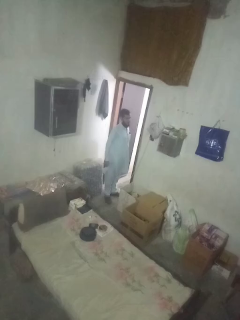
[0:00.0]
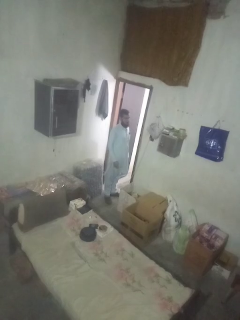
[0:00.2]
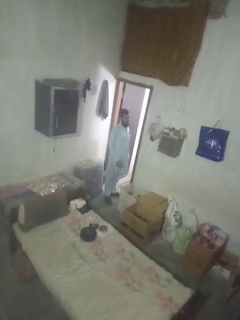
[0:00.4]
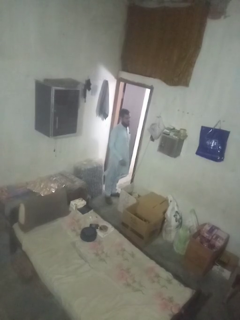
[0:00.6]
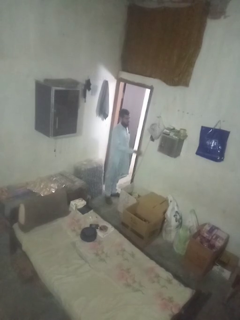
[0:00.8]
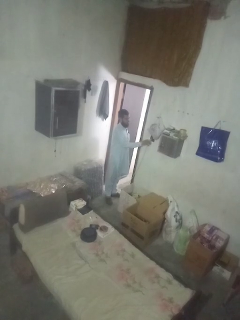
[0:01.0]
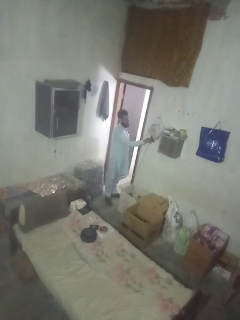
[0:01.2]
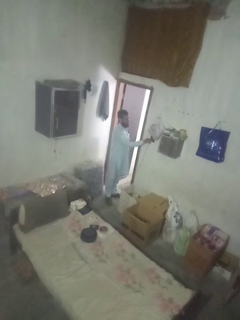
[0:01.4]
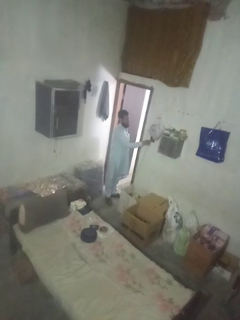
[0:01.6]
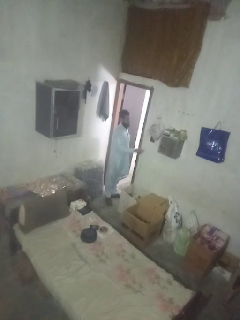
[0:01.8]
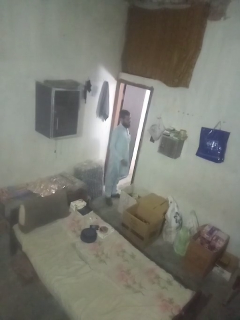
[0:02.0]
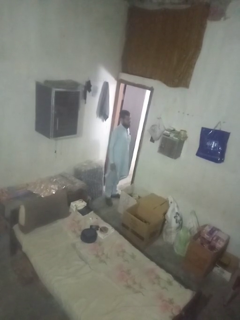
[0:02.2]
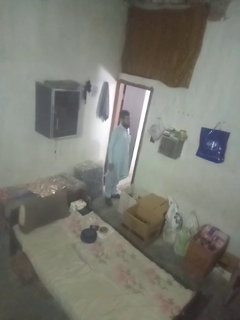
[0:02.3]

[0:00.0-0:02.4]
person unplugs from electrical socket

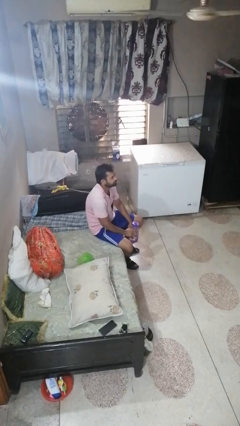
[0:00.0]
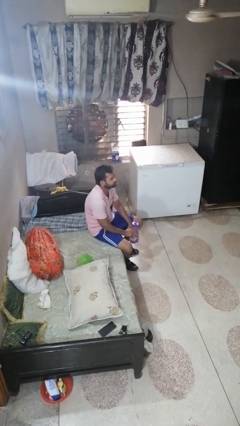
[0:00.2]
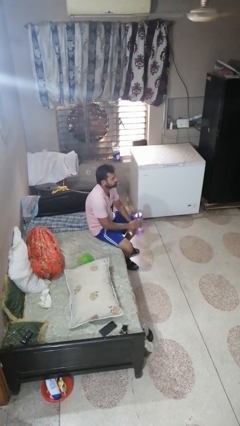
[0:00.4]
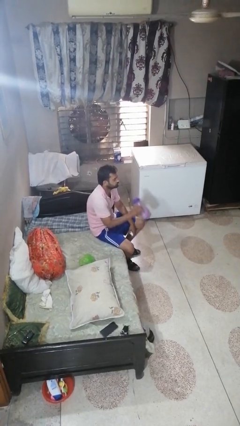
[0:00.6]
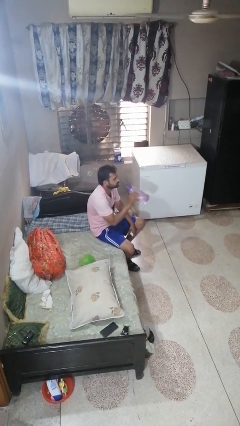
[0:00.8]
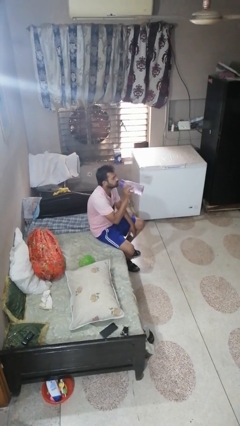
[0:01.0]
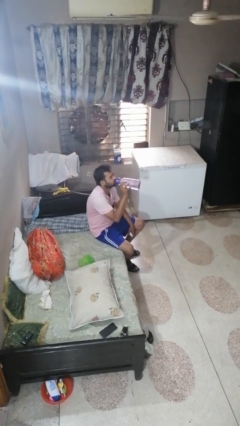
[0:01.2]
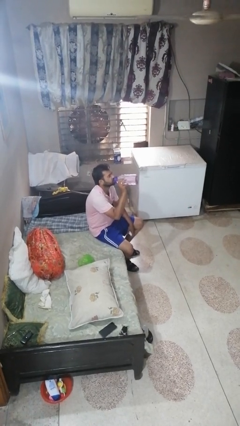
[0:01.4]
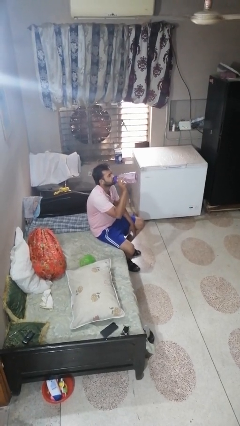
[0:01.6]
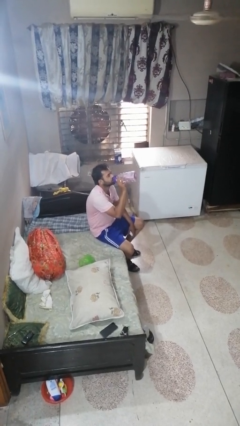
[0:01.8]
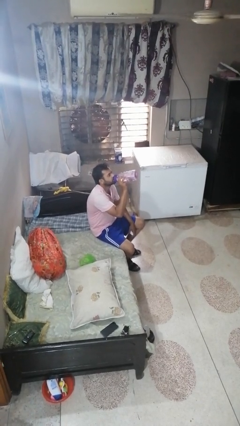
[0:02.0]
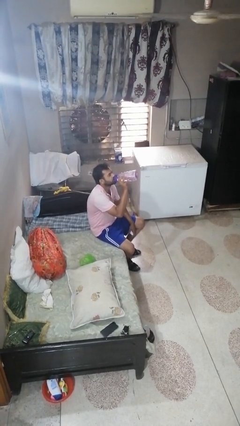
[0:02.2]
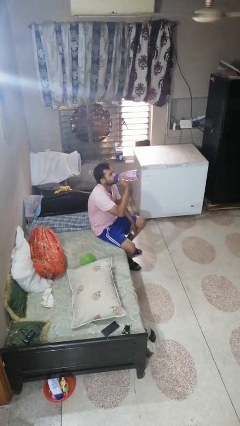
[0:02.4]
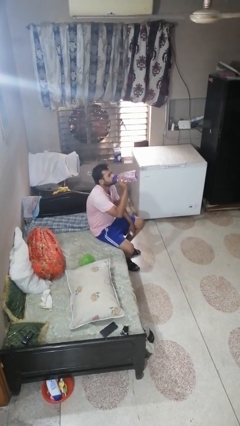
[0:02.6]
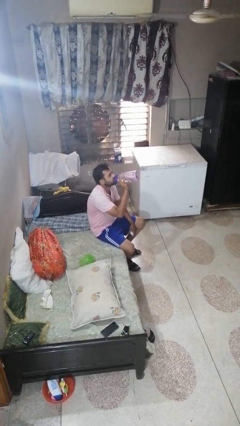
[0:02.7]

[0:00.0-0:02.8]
person drinks from bottle

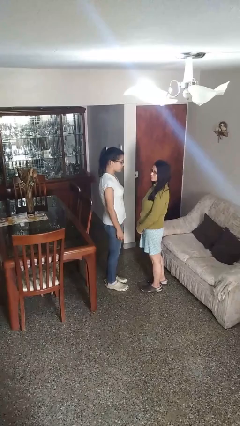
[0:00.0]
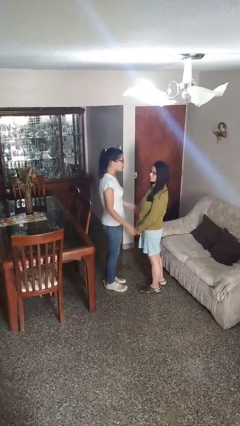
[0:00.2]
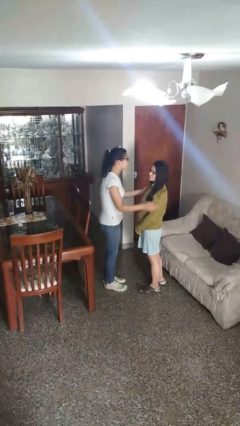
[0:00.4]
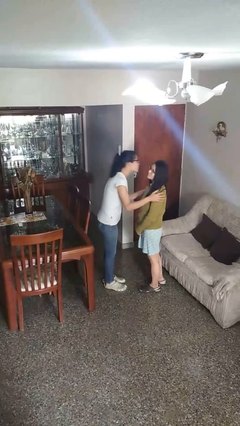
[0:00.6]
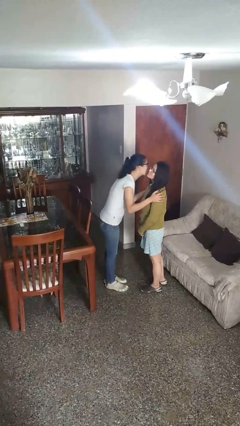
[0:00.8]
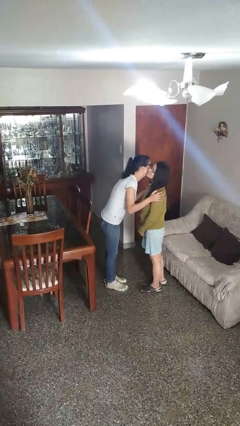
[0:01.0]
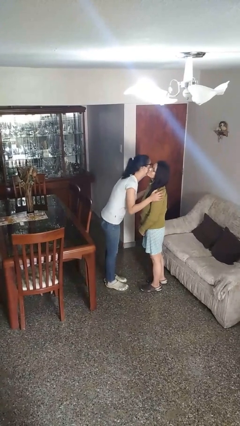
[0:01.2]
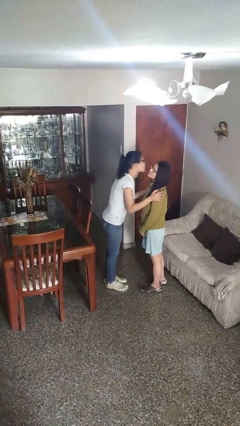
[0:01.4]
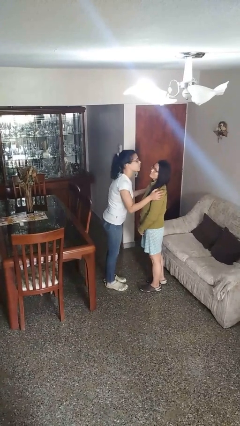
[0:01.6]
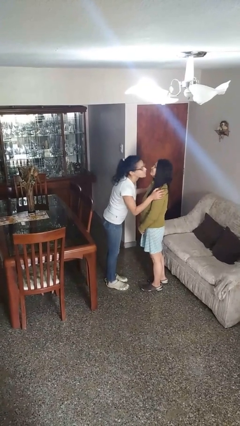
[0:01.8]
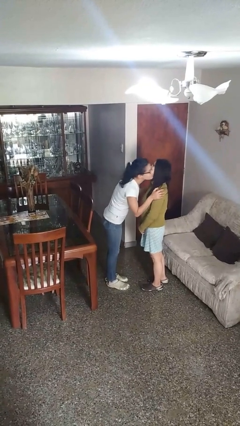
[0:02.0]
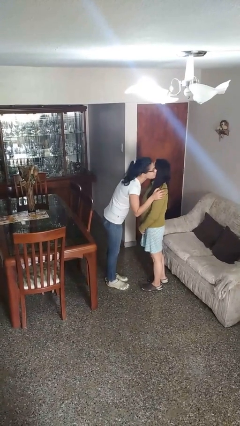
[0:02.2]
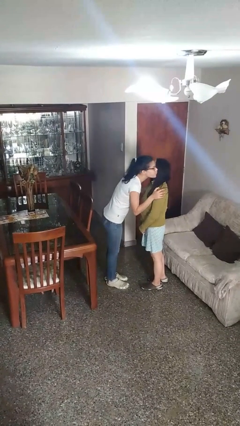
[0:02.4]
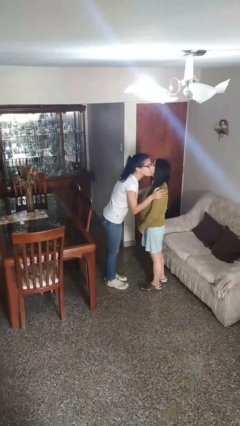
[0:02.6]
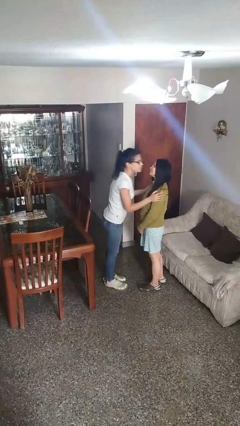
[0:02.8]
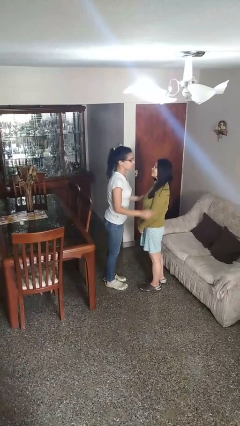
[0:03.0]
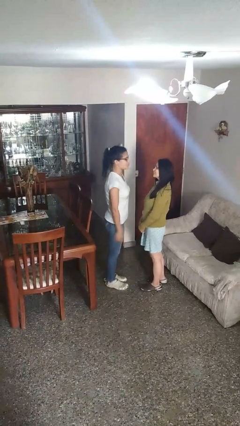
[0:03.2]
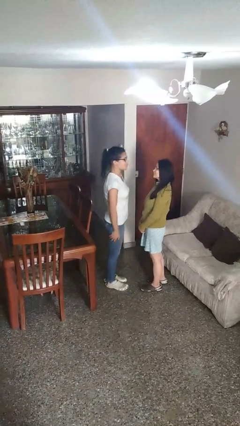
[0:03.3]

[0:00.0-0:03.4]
person kisses cheek of person

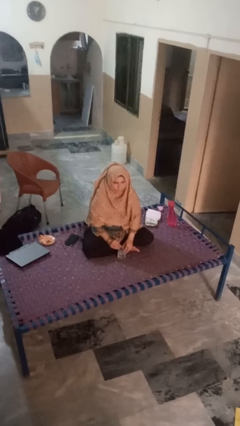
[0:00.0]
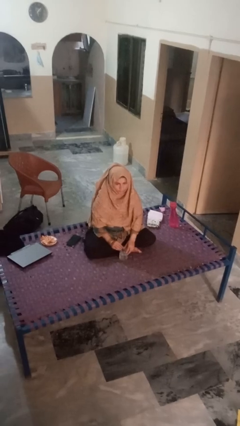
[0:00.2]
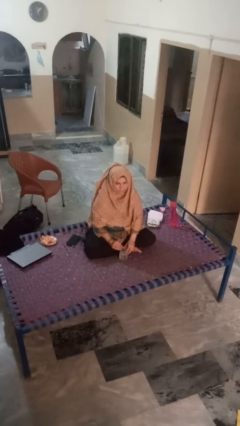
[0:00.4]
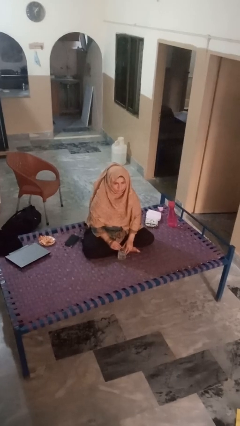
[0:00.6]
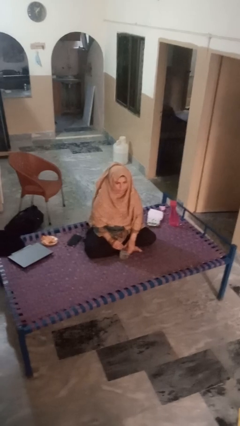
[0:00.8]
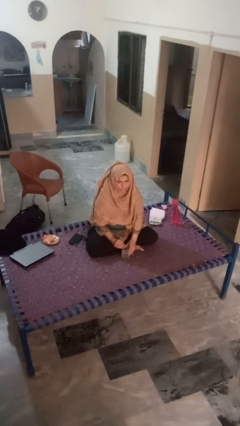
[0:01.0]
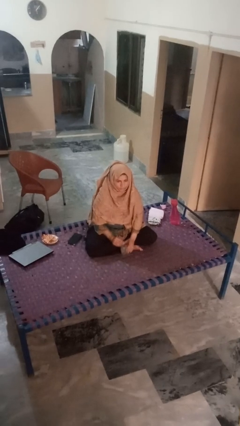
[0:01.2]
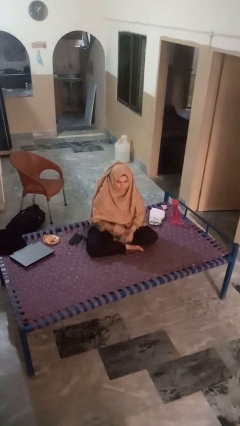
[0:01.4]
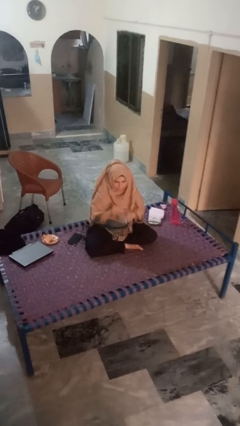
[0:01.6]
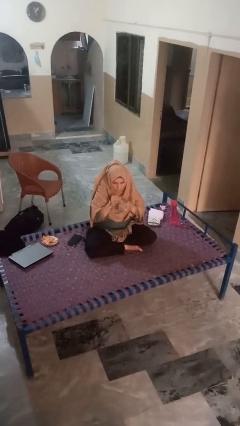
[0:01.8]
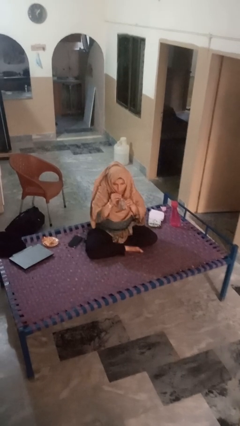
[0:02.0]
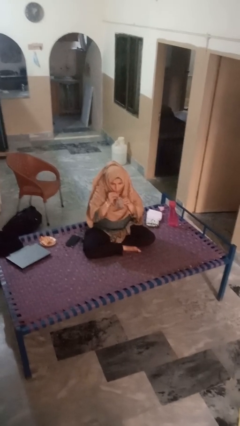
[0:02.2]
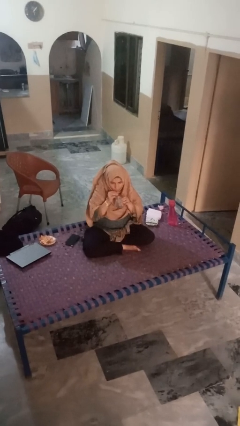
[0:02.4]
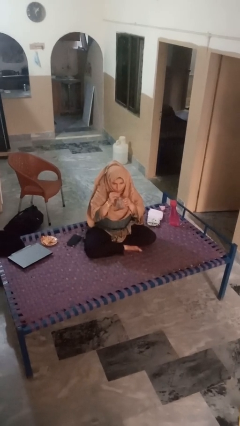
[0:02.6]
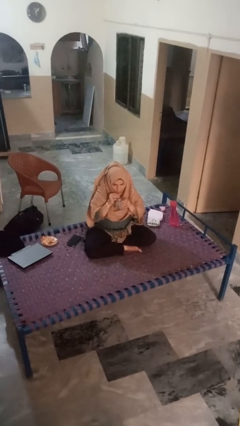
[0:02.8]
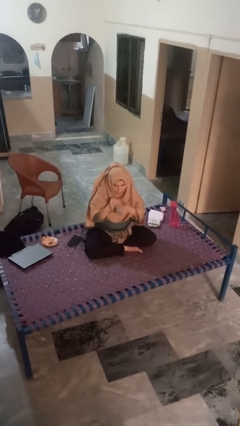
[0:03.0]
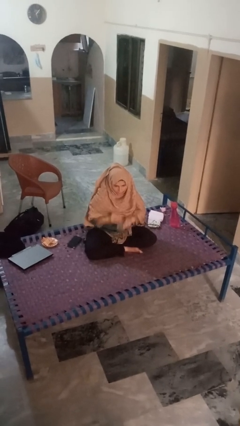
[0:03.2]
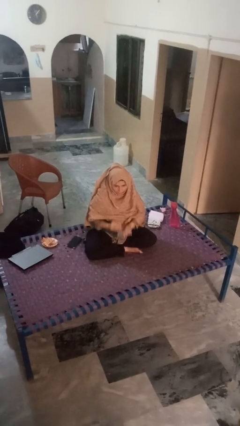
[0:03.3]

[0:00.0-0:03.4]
person drinks from straw

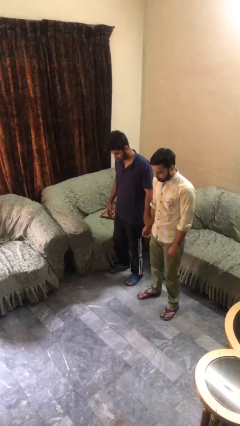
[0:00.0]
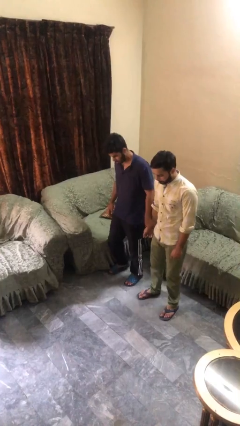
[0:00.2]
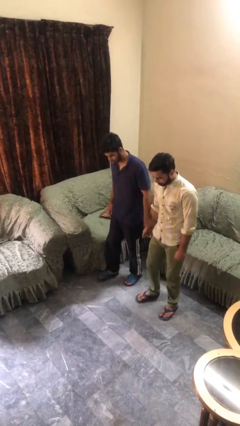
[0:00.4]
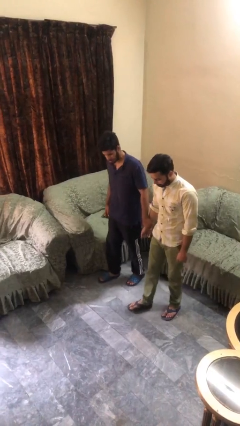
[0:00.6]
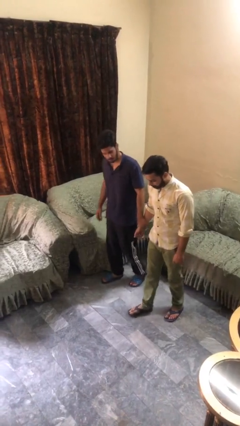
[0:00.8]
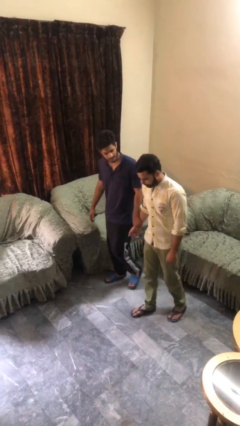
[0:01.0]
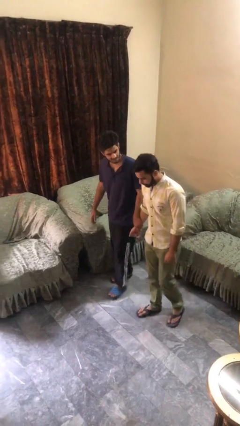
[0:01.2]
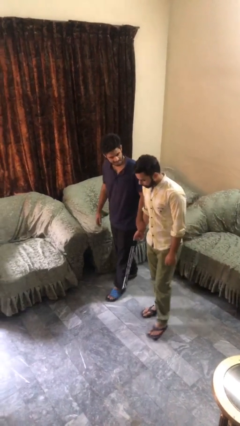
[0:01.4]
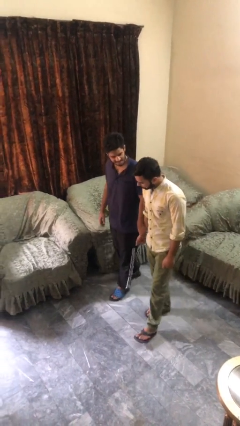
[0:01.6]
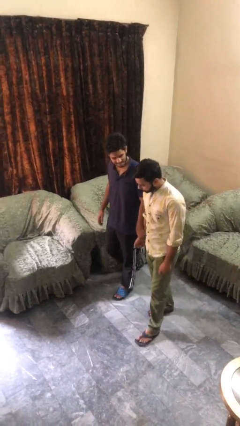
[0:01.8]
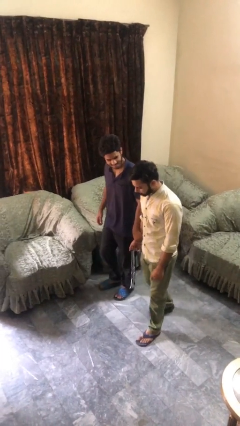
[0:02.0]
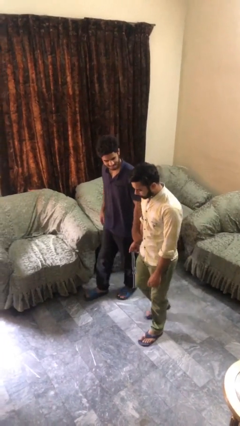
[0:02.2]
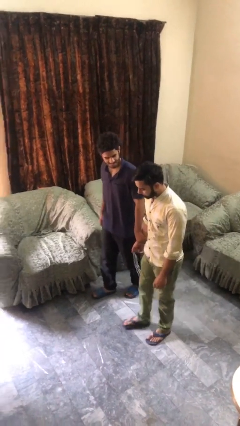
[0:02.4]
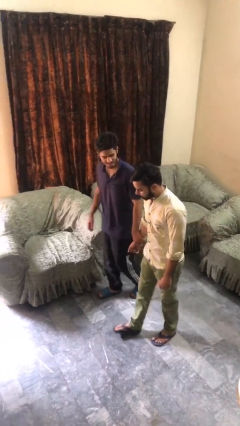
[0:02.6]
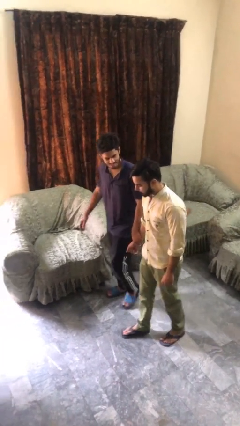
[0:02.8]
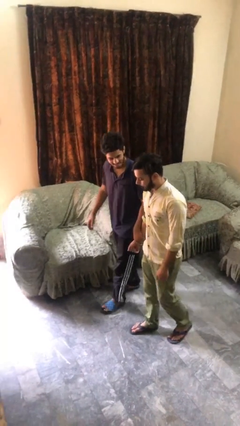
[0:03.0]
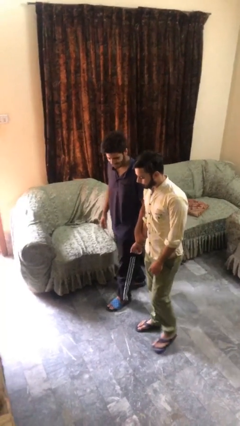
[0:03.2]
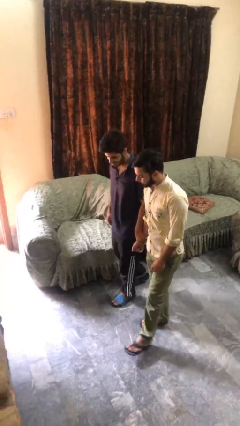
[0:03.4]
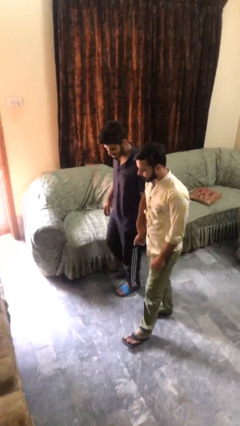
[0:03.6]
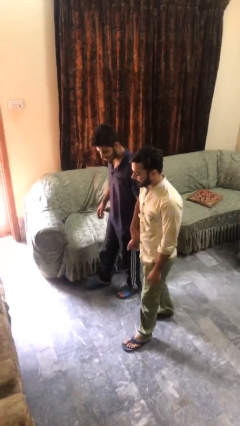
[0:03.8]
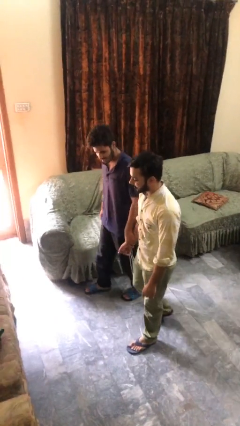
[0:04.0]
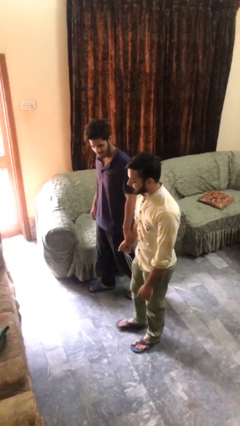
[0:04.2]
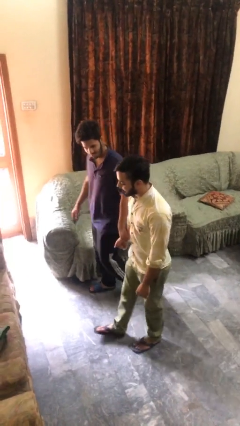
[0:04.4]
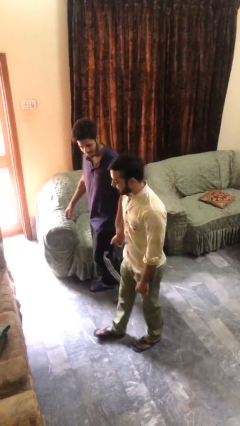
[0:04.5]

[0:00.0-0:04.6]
person holds hand

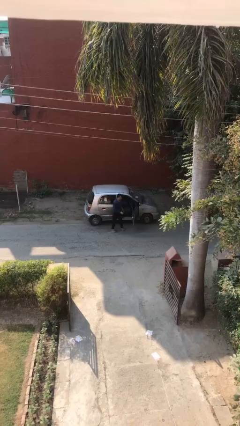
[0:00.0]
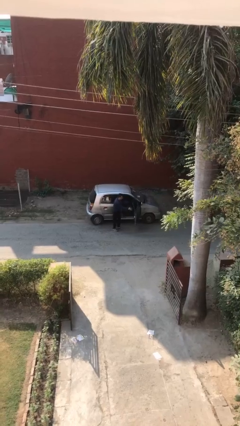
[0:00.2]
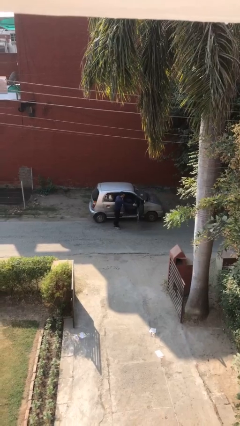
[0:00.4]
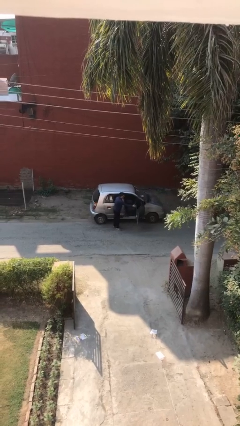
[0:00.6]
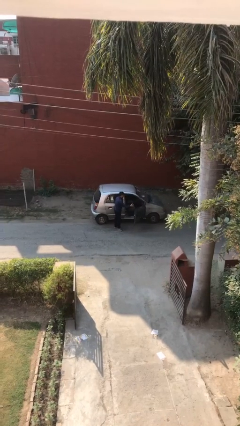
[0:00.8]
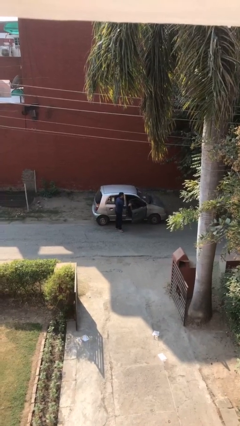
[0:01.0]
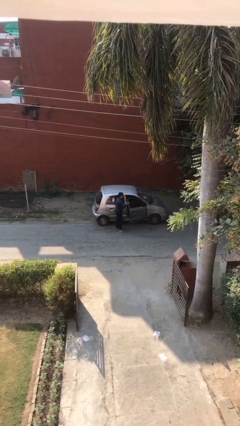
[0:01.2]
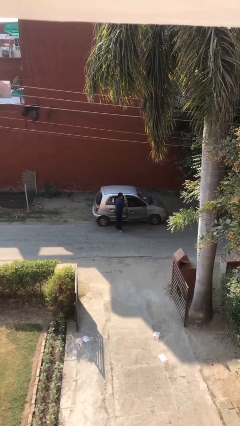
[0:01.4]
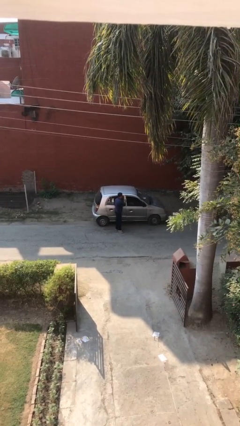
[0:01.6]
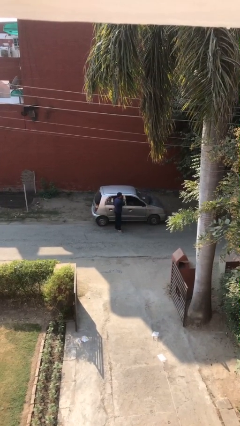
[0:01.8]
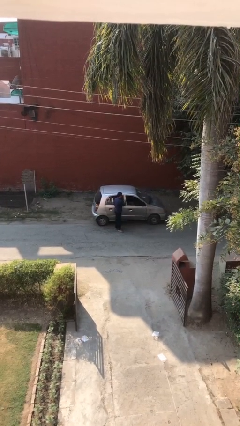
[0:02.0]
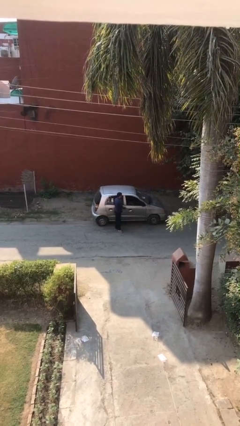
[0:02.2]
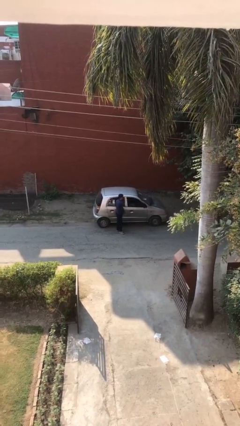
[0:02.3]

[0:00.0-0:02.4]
person closes car door
